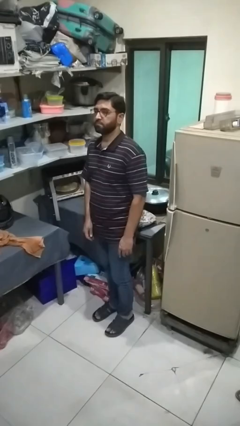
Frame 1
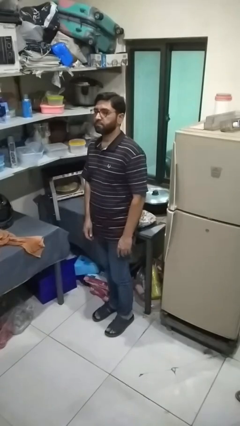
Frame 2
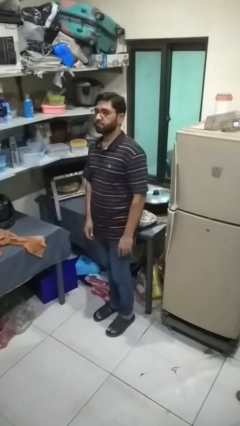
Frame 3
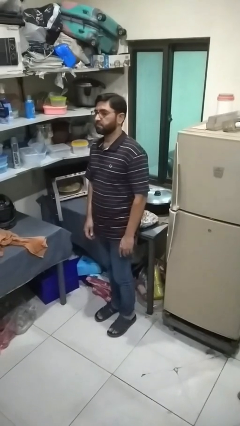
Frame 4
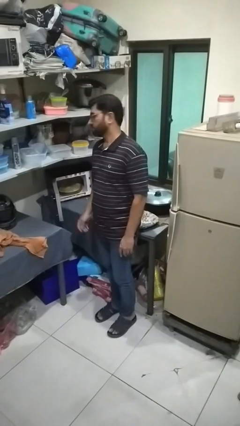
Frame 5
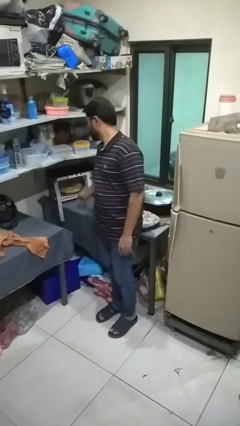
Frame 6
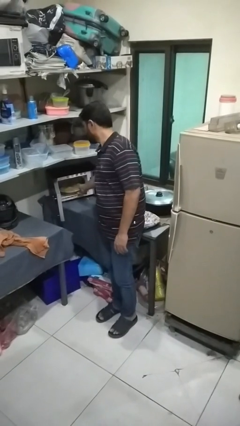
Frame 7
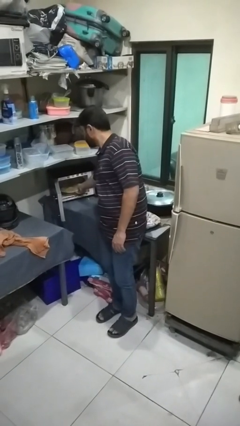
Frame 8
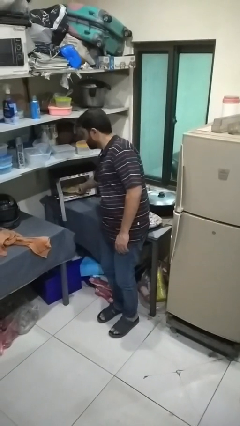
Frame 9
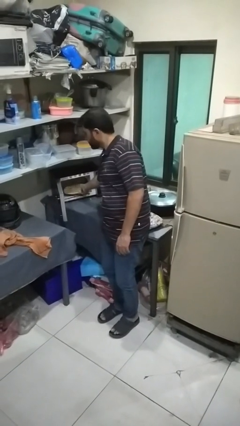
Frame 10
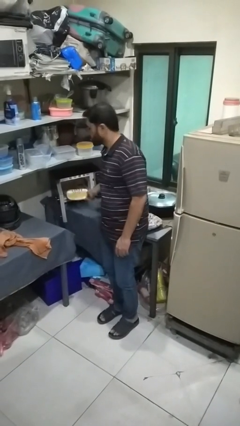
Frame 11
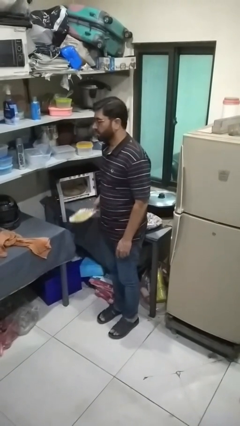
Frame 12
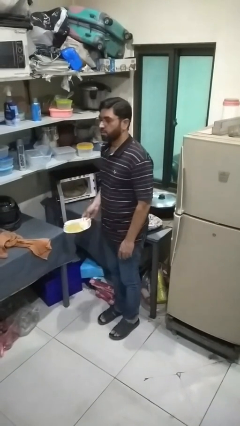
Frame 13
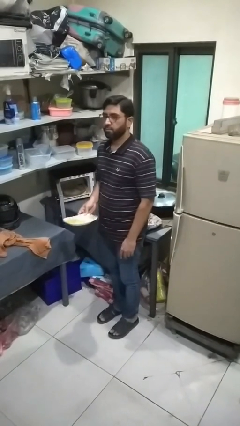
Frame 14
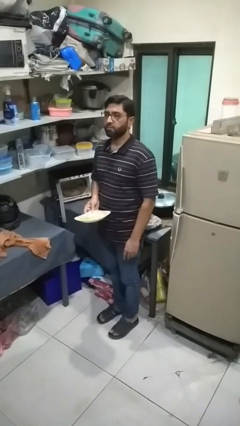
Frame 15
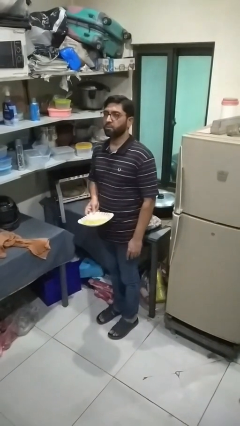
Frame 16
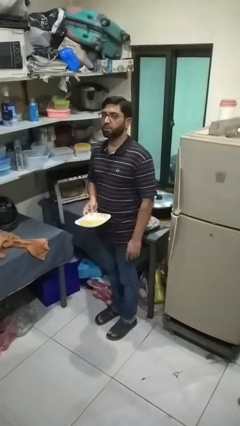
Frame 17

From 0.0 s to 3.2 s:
person takes object from microwave

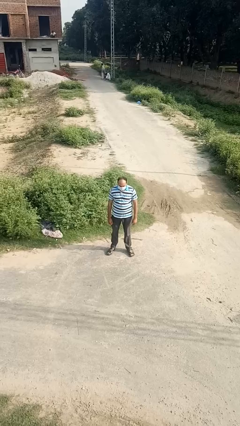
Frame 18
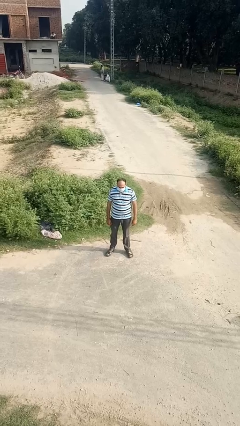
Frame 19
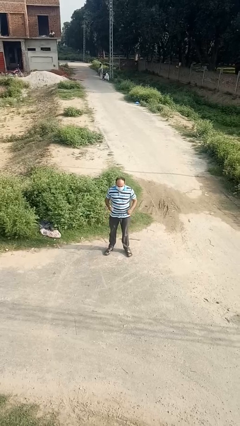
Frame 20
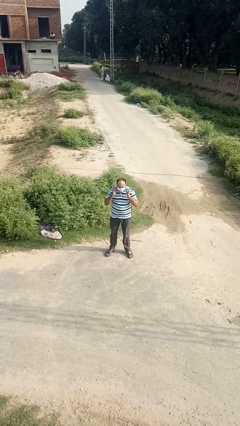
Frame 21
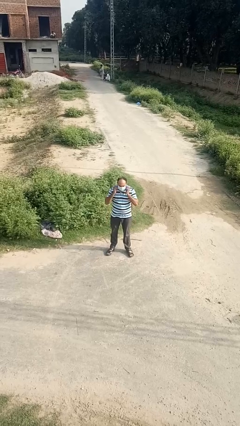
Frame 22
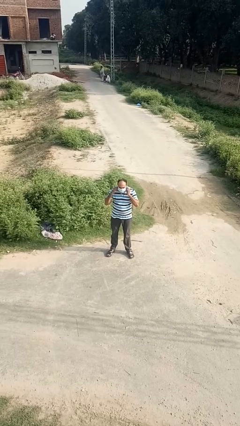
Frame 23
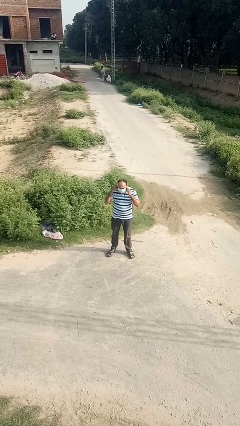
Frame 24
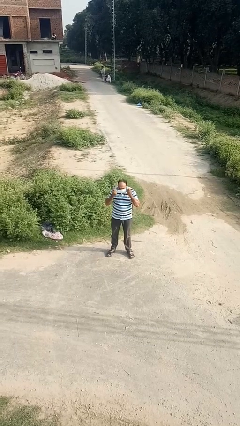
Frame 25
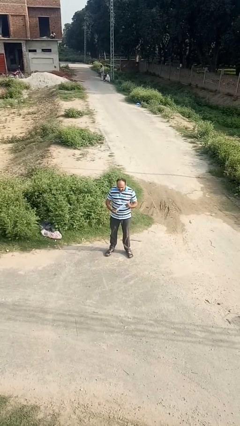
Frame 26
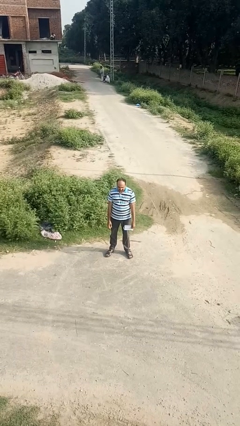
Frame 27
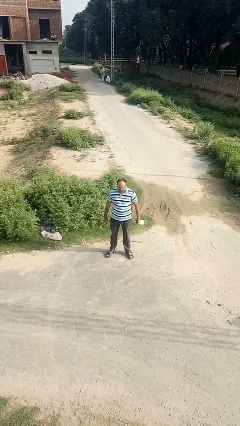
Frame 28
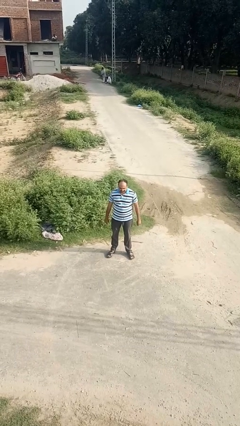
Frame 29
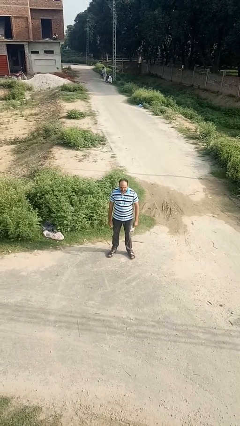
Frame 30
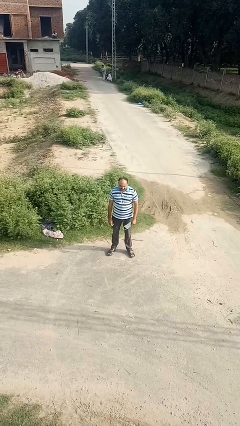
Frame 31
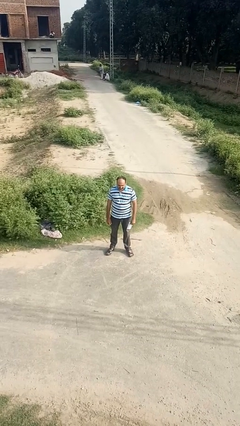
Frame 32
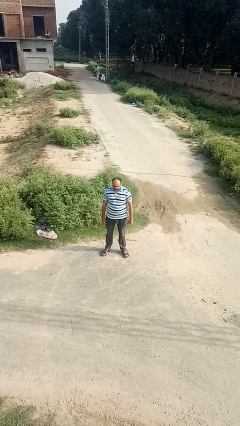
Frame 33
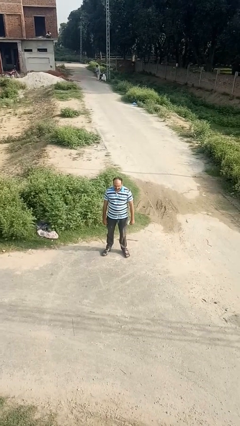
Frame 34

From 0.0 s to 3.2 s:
person takes off facemask

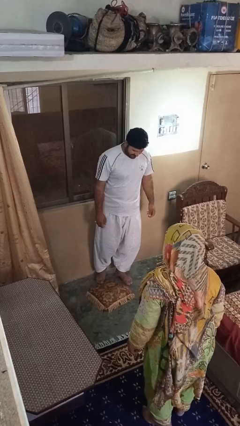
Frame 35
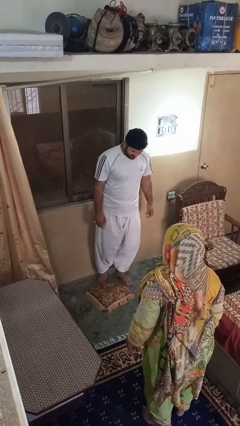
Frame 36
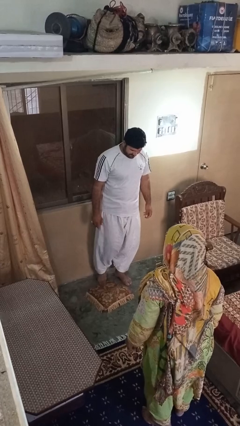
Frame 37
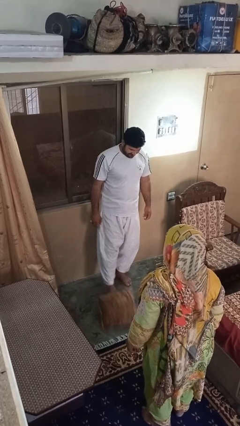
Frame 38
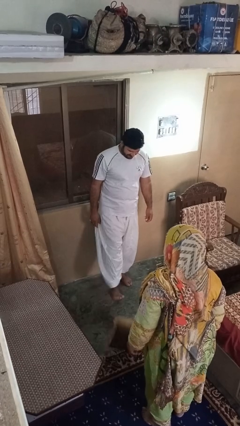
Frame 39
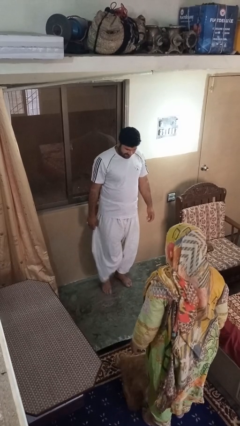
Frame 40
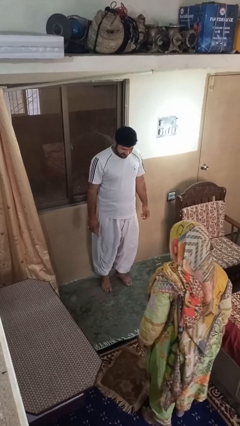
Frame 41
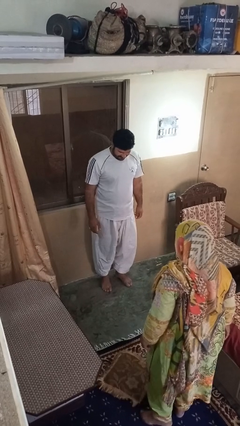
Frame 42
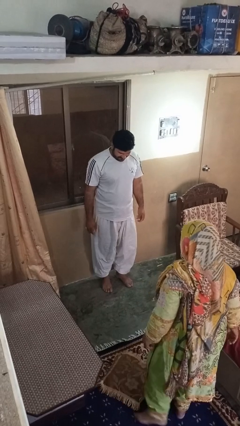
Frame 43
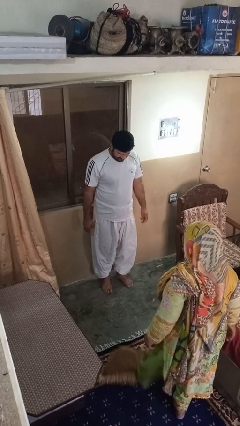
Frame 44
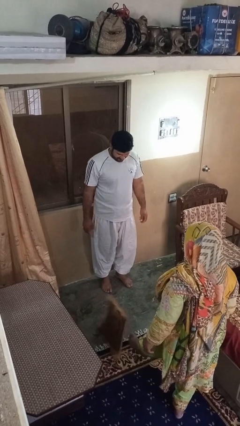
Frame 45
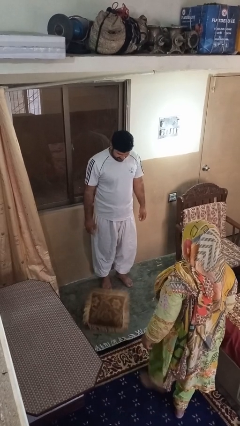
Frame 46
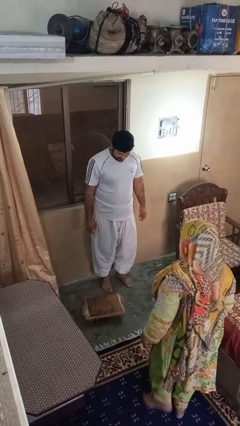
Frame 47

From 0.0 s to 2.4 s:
person kicks object to person

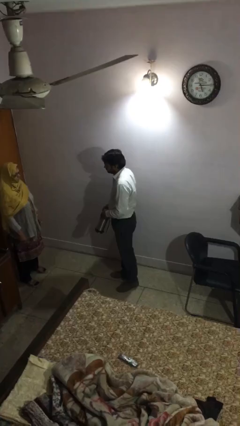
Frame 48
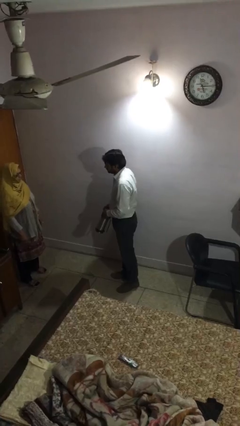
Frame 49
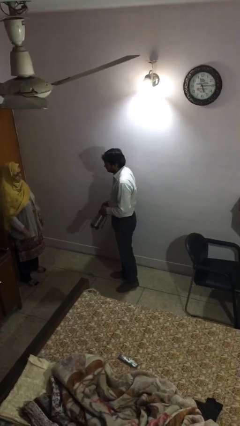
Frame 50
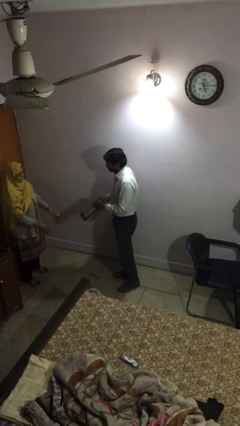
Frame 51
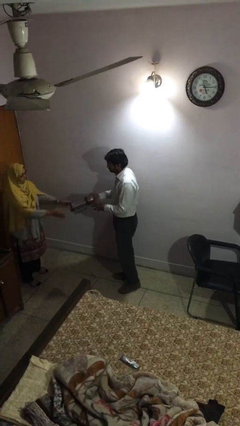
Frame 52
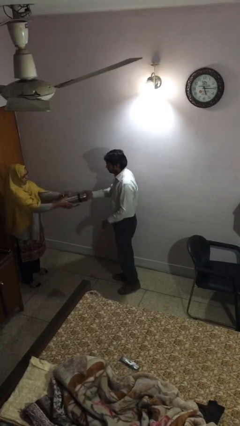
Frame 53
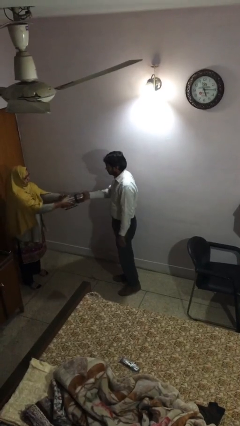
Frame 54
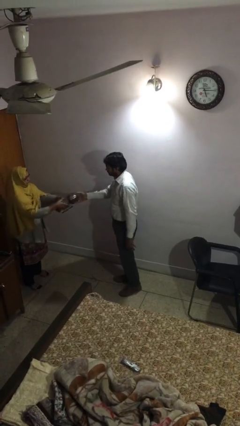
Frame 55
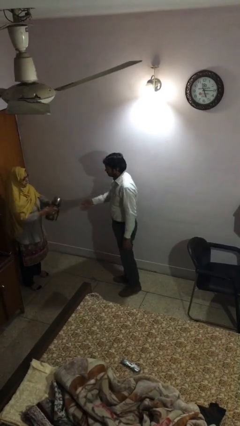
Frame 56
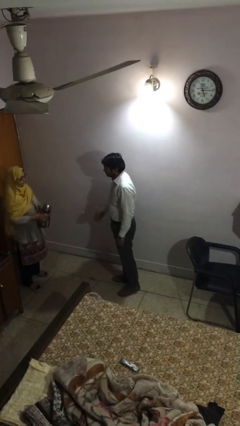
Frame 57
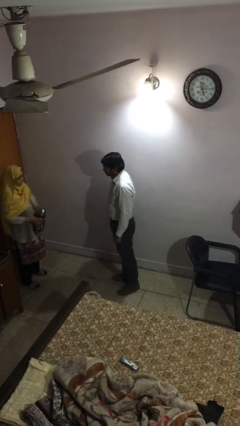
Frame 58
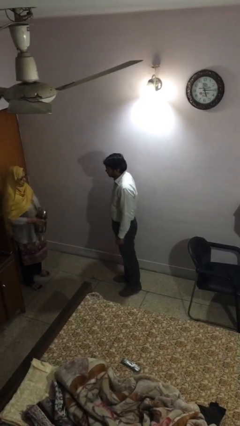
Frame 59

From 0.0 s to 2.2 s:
person transfers object to person

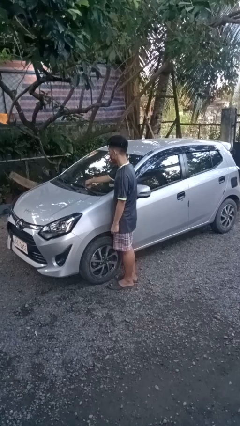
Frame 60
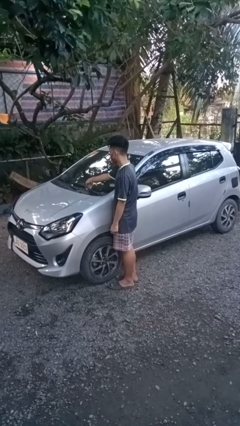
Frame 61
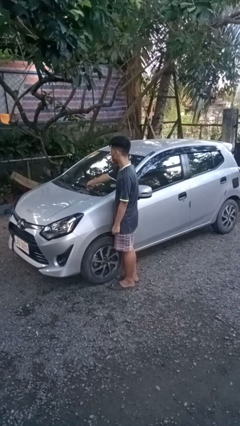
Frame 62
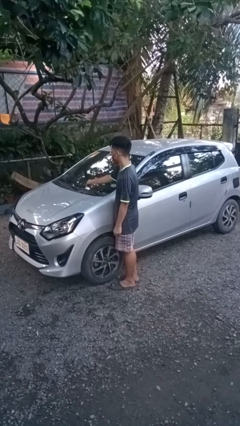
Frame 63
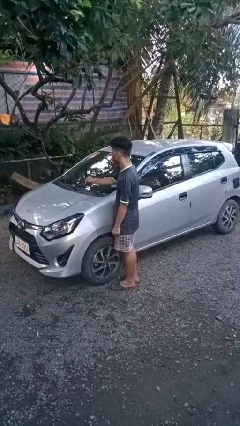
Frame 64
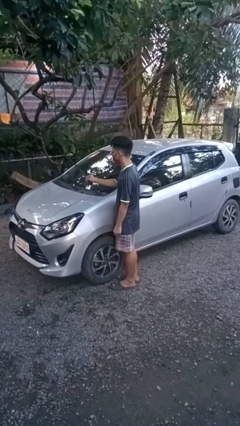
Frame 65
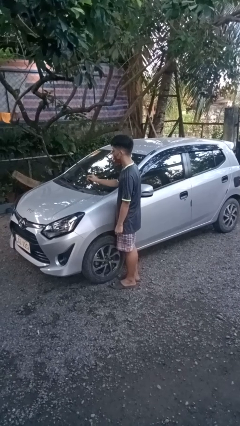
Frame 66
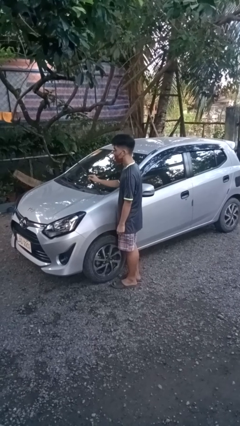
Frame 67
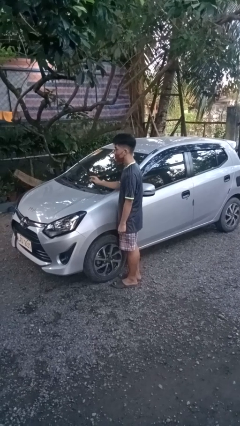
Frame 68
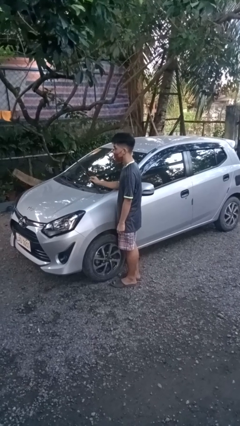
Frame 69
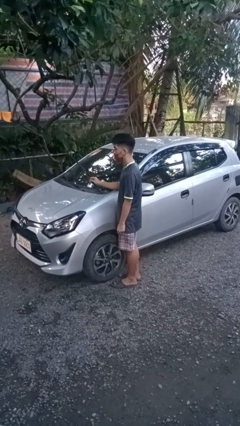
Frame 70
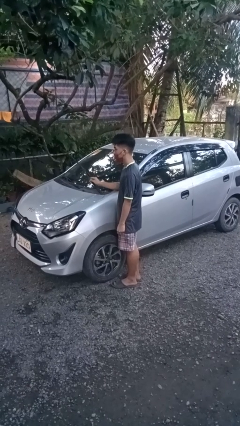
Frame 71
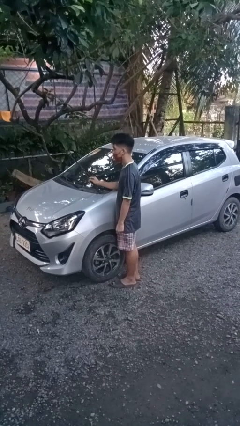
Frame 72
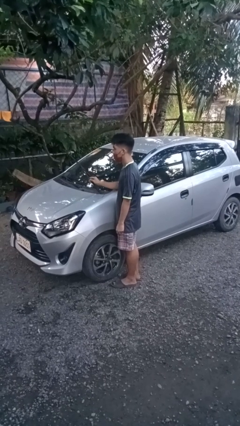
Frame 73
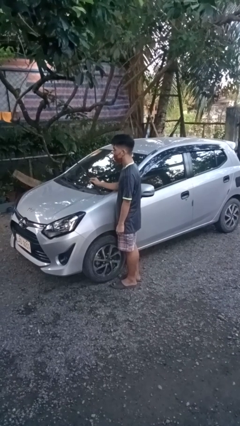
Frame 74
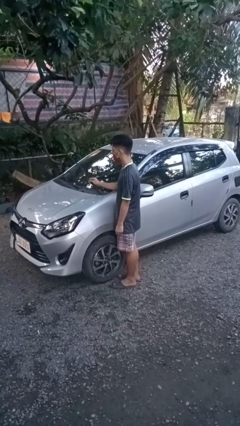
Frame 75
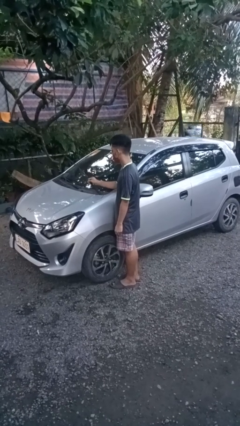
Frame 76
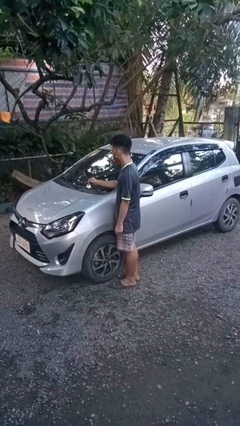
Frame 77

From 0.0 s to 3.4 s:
person flips up car wipers

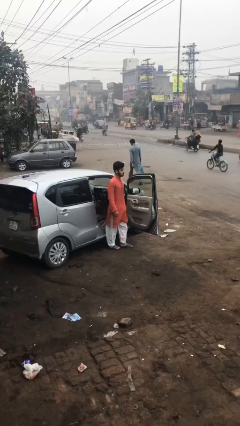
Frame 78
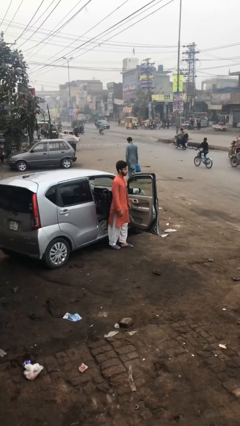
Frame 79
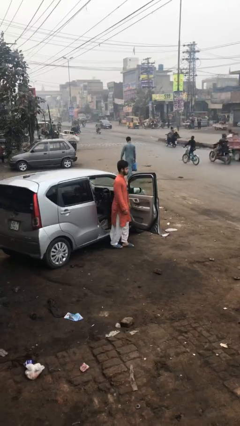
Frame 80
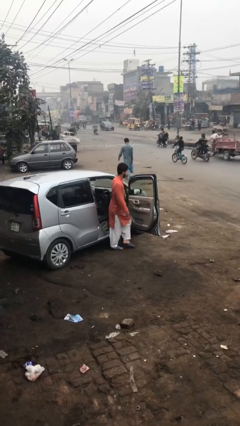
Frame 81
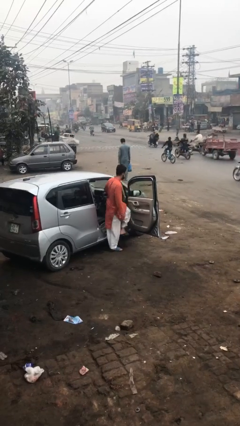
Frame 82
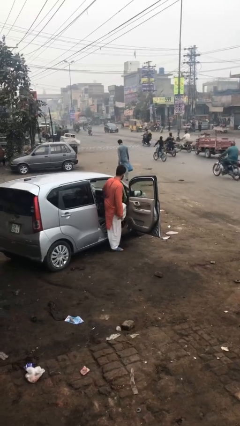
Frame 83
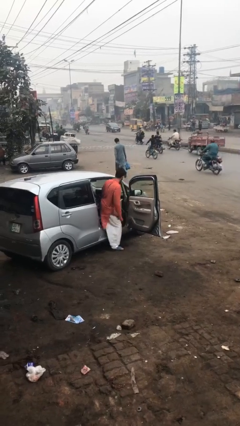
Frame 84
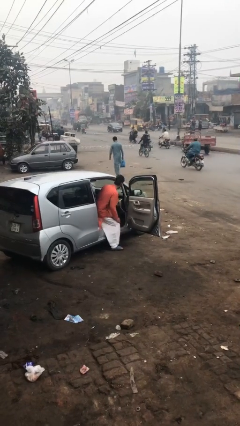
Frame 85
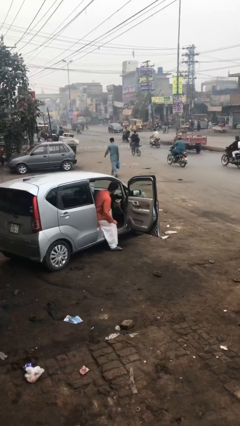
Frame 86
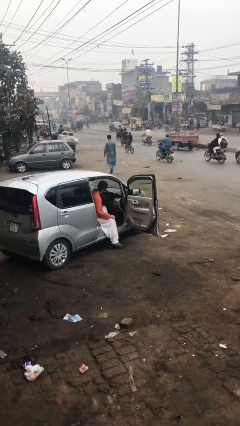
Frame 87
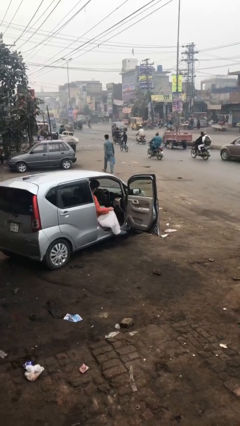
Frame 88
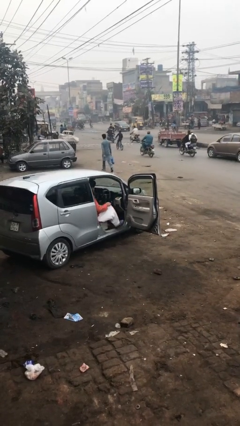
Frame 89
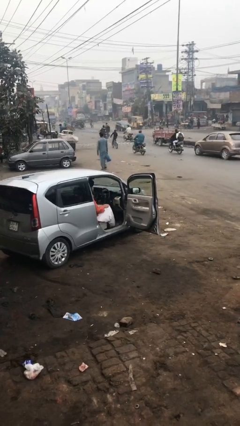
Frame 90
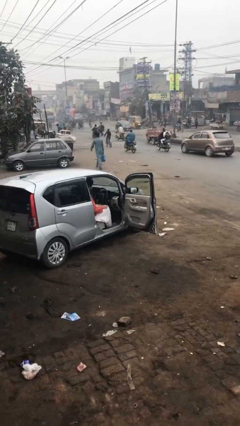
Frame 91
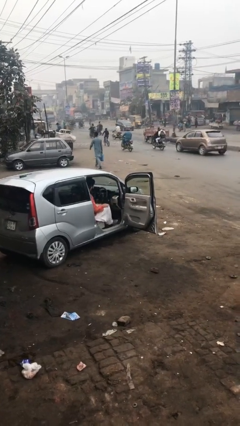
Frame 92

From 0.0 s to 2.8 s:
person enters car

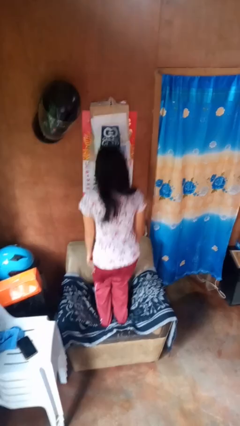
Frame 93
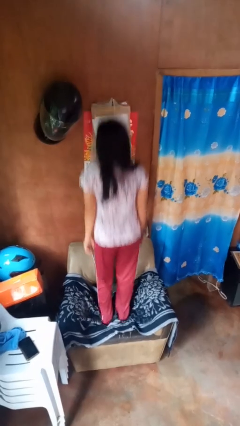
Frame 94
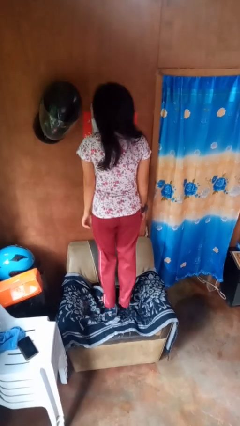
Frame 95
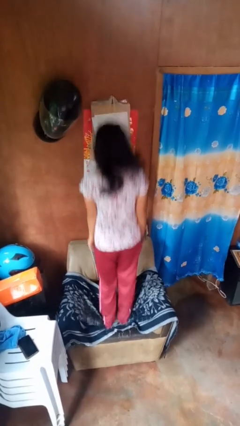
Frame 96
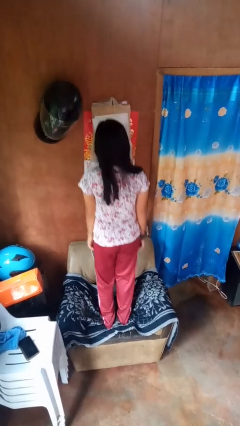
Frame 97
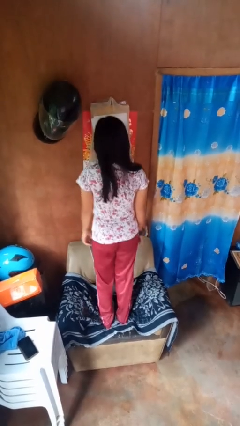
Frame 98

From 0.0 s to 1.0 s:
person jumps on couch
